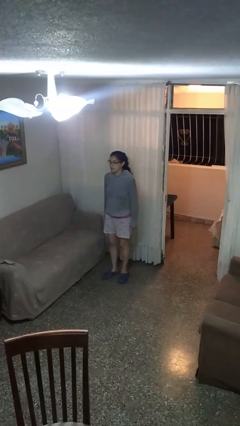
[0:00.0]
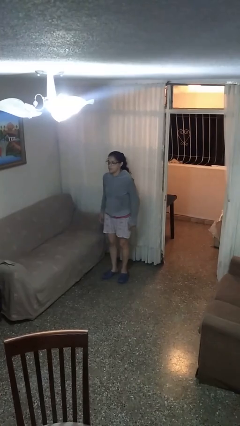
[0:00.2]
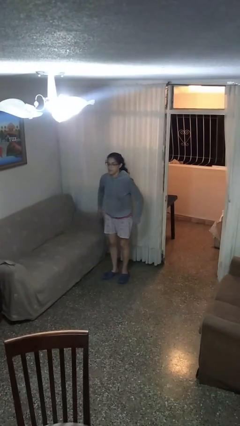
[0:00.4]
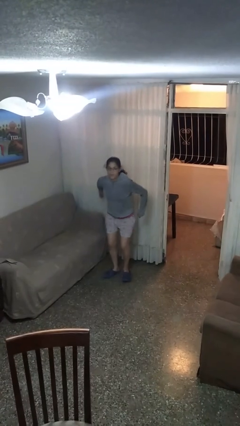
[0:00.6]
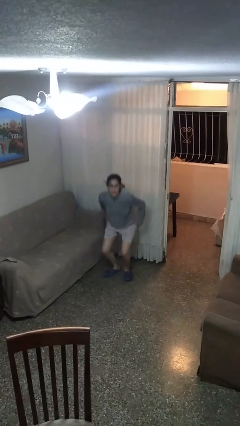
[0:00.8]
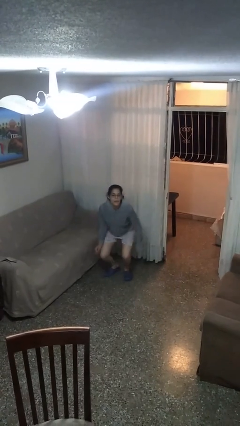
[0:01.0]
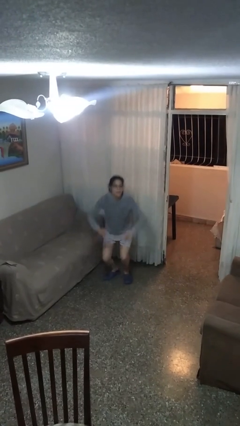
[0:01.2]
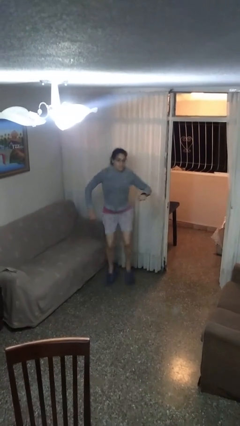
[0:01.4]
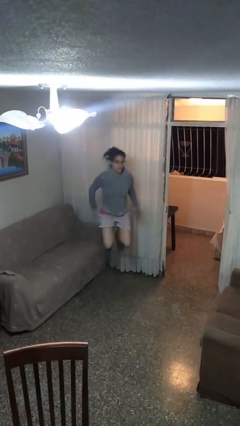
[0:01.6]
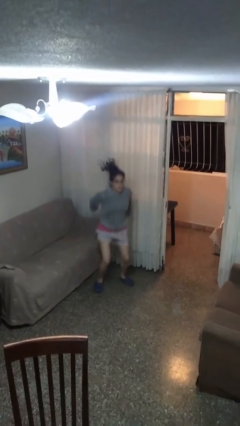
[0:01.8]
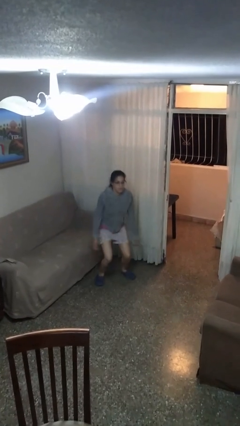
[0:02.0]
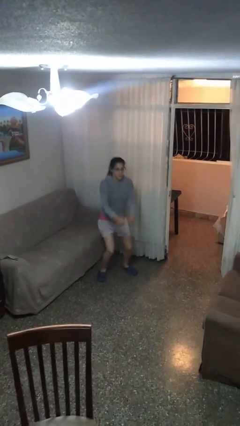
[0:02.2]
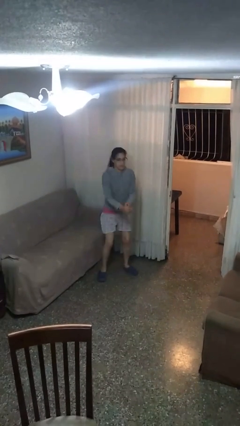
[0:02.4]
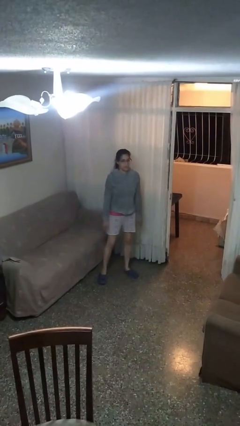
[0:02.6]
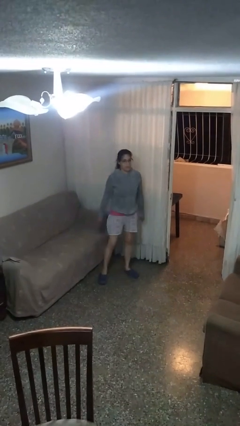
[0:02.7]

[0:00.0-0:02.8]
person jumps

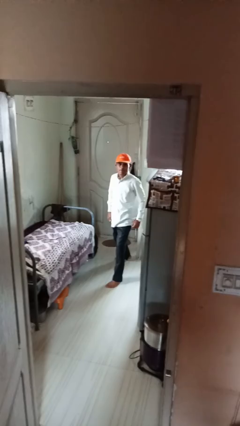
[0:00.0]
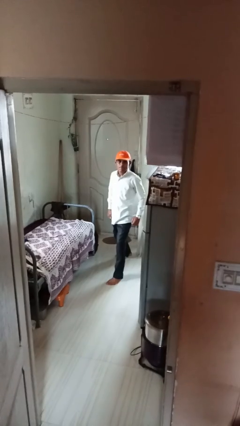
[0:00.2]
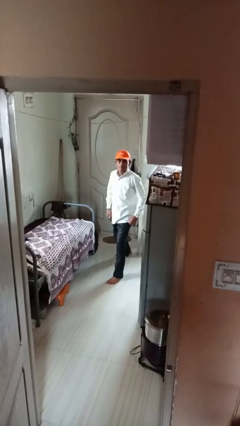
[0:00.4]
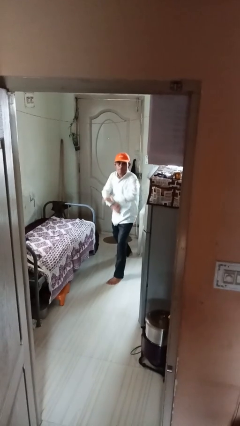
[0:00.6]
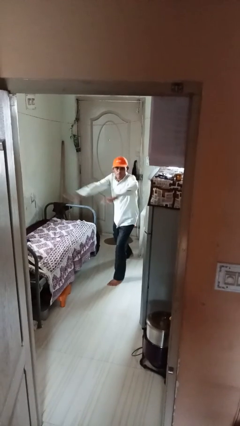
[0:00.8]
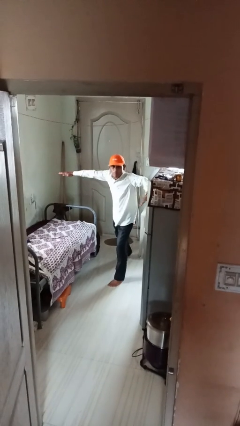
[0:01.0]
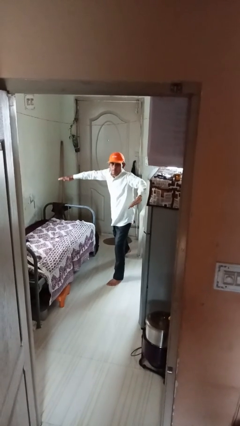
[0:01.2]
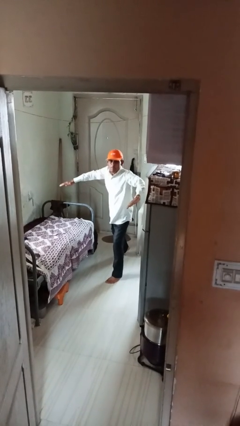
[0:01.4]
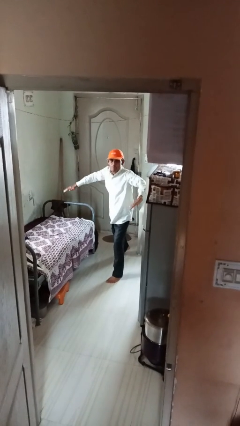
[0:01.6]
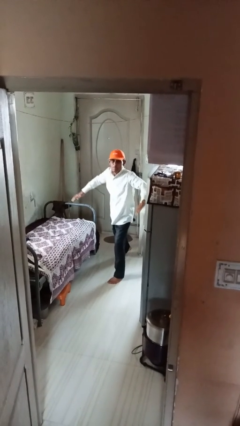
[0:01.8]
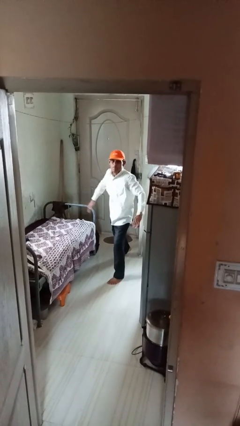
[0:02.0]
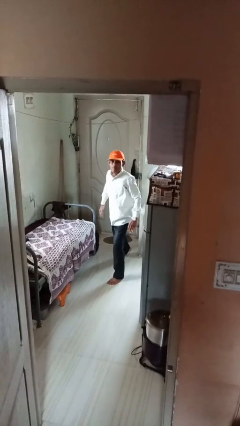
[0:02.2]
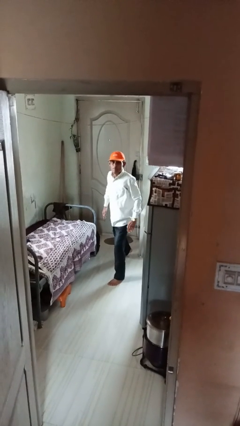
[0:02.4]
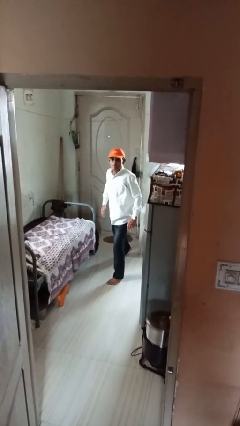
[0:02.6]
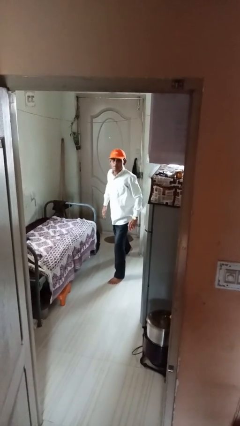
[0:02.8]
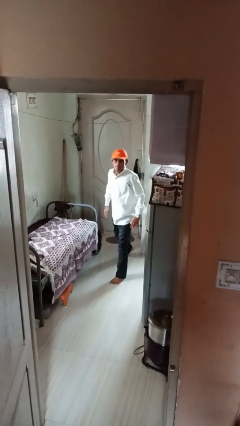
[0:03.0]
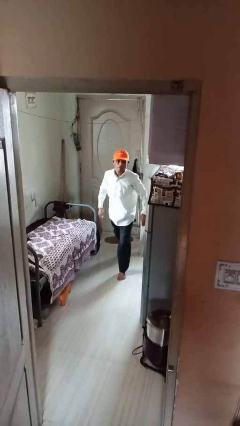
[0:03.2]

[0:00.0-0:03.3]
person karate chop

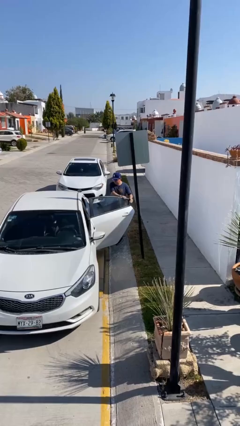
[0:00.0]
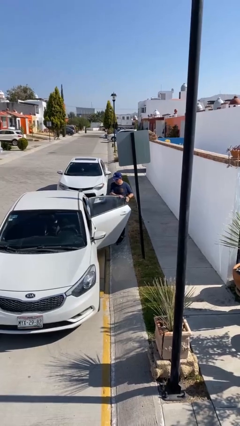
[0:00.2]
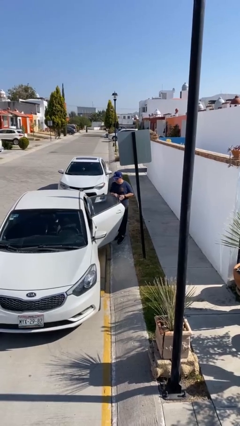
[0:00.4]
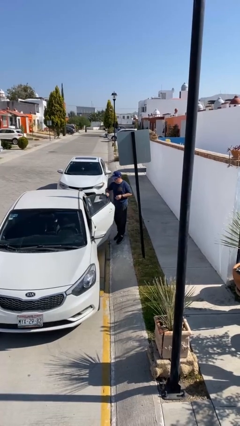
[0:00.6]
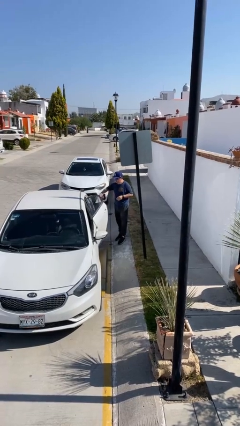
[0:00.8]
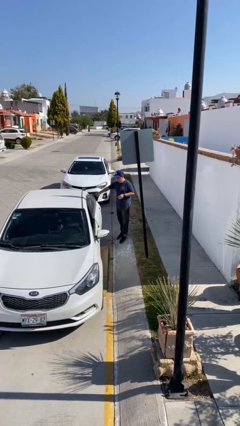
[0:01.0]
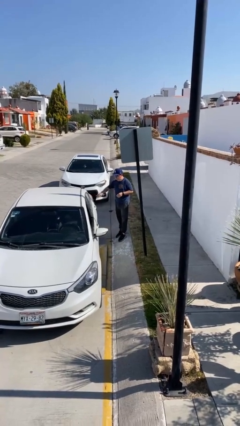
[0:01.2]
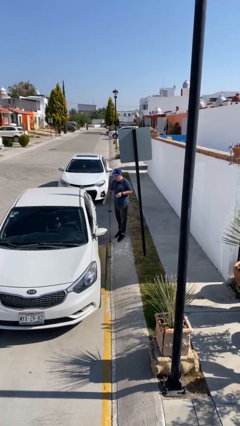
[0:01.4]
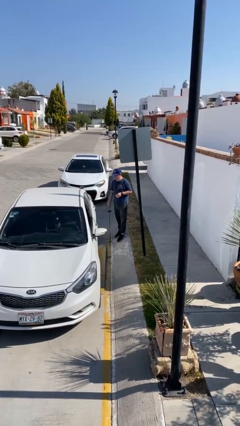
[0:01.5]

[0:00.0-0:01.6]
person closes car door

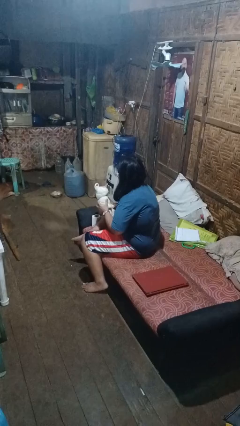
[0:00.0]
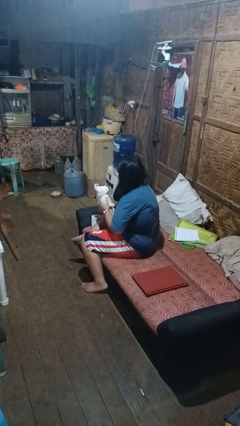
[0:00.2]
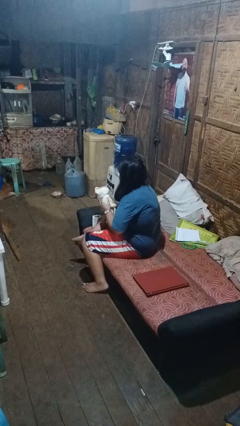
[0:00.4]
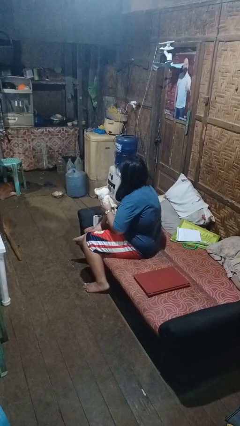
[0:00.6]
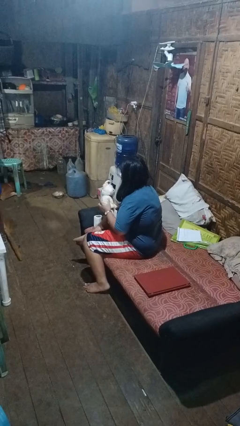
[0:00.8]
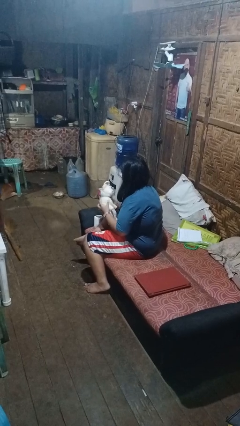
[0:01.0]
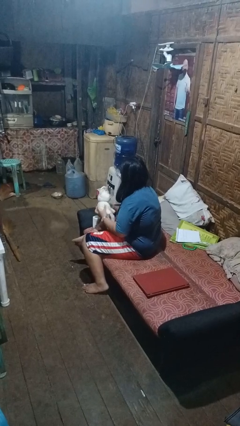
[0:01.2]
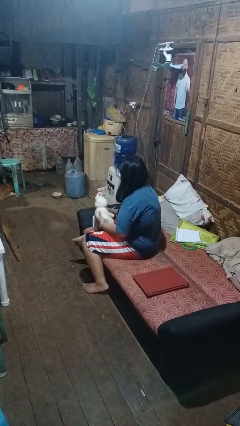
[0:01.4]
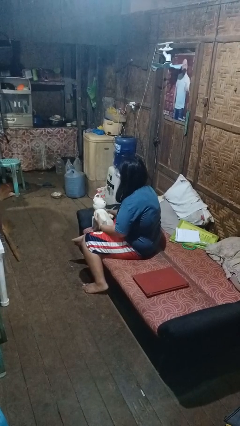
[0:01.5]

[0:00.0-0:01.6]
person squeezes object

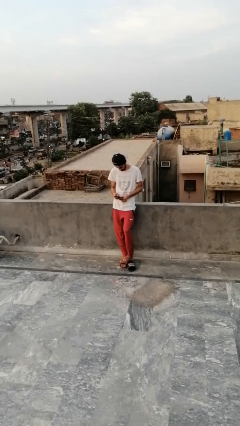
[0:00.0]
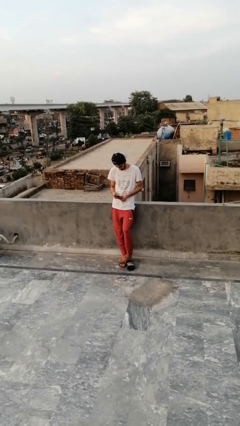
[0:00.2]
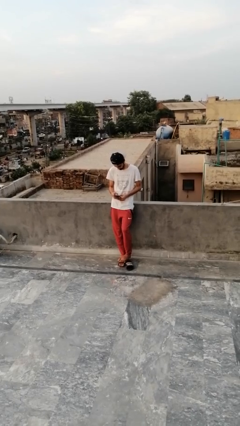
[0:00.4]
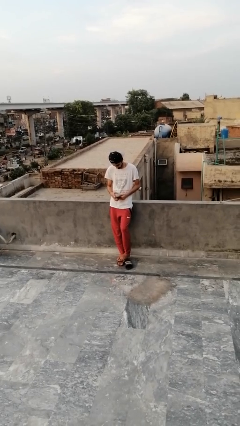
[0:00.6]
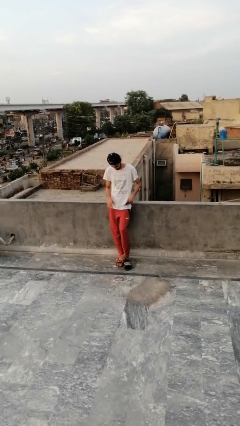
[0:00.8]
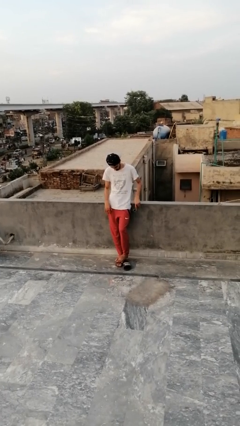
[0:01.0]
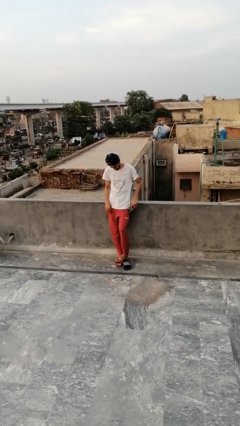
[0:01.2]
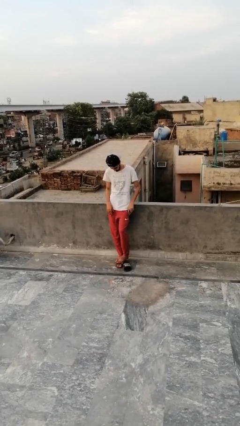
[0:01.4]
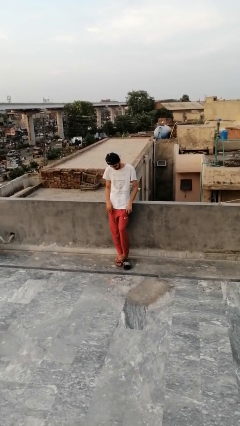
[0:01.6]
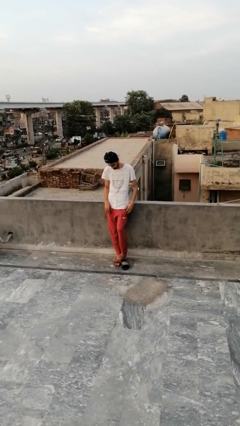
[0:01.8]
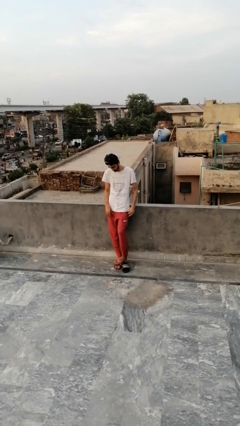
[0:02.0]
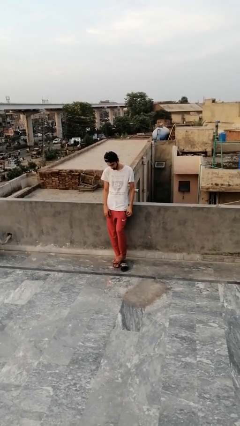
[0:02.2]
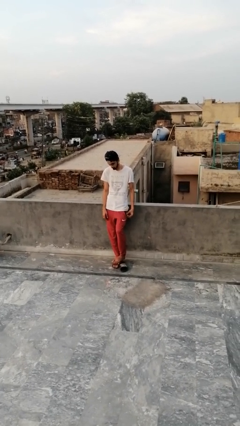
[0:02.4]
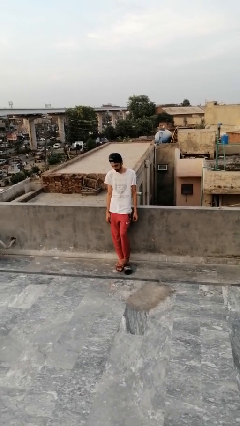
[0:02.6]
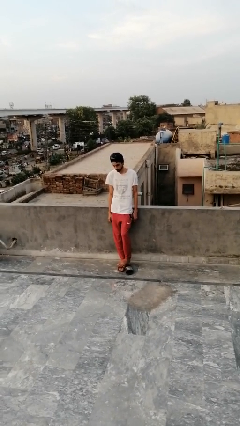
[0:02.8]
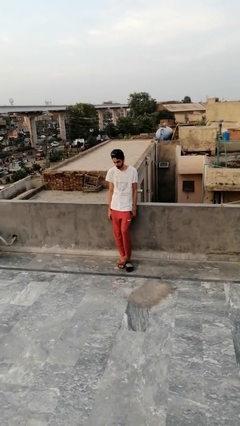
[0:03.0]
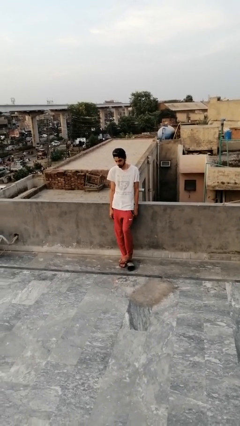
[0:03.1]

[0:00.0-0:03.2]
person puts phone into pocket

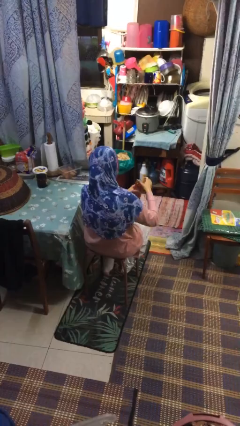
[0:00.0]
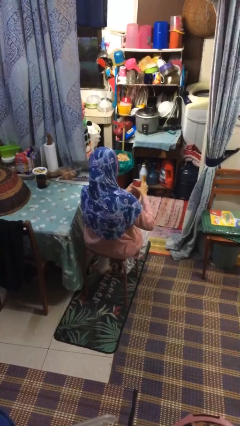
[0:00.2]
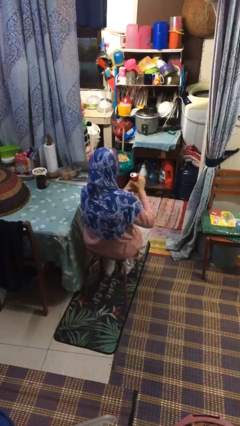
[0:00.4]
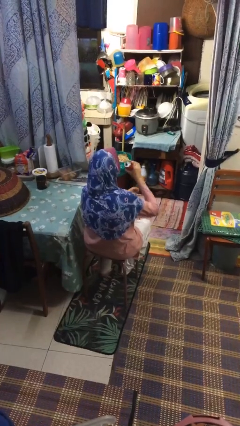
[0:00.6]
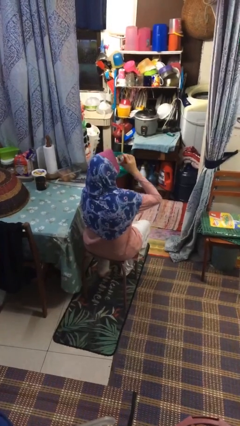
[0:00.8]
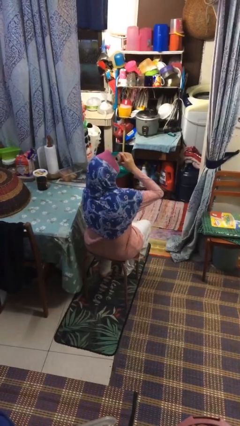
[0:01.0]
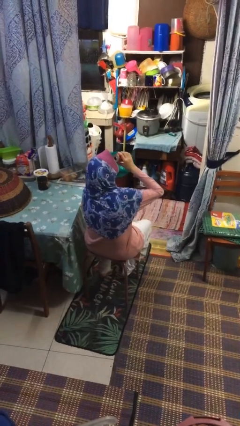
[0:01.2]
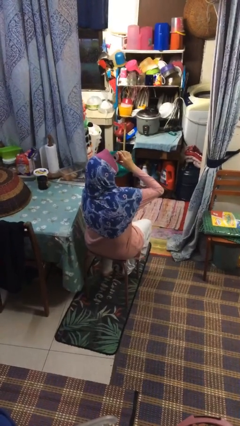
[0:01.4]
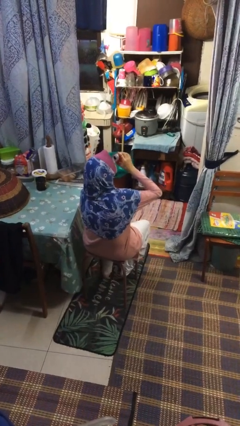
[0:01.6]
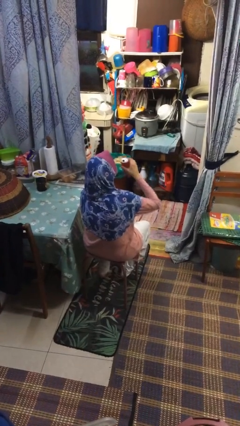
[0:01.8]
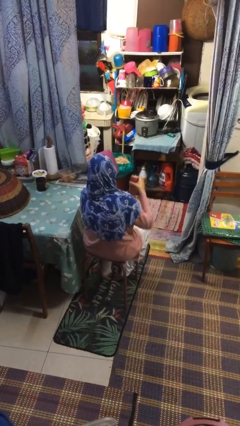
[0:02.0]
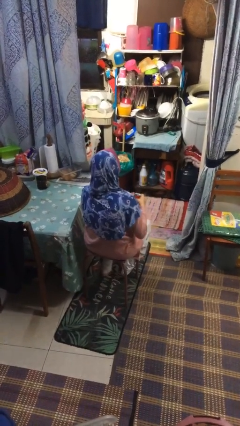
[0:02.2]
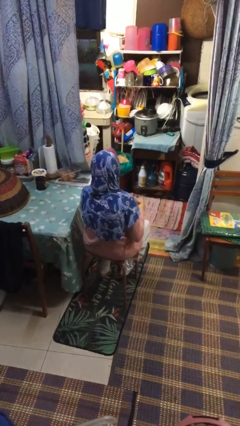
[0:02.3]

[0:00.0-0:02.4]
person drinks from beverage can

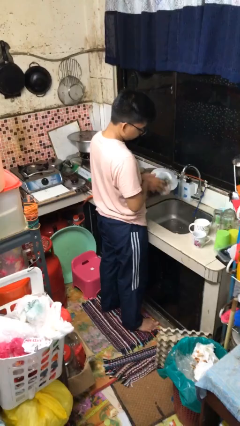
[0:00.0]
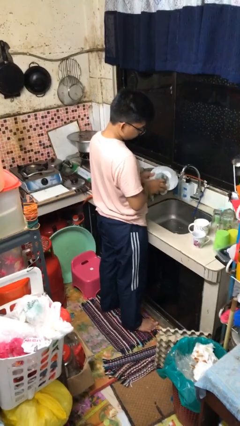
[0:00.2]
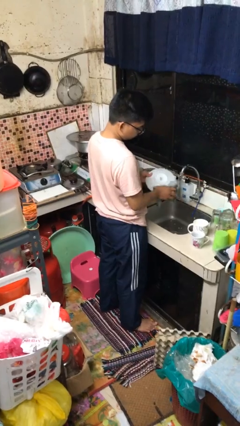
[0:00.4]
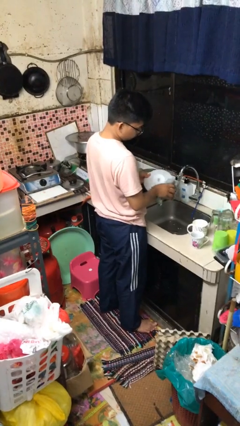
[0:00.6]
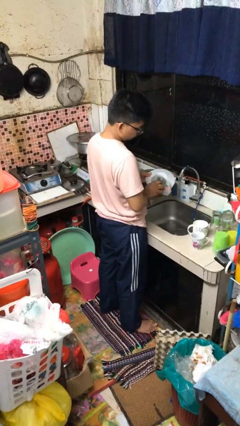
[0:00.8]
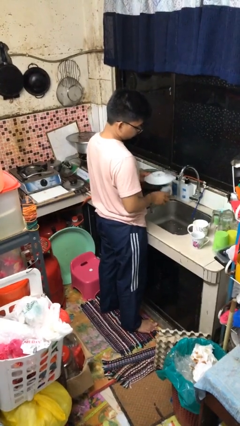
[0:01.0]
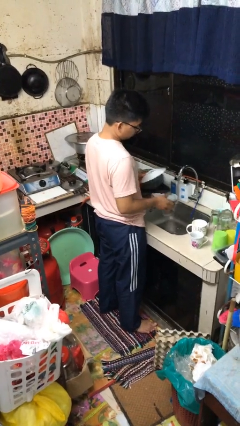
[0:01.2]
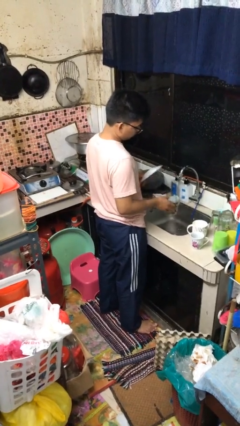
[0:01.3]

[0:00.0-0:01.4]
person dries dish

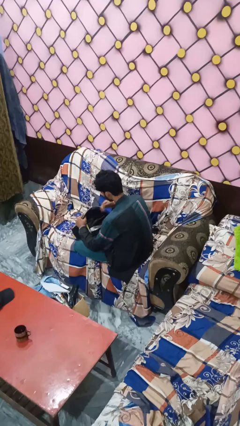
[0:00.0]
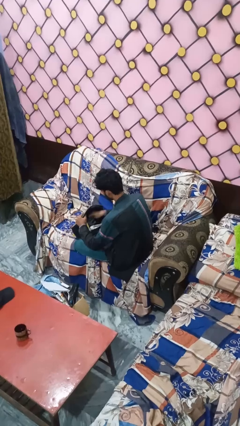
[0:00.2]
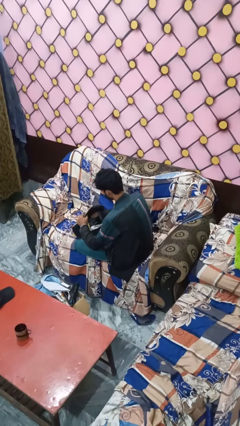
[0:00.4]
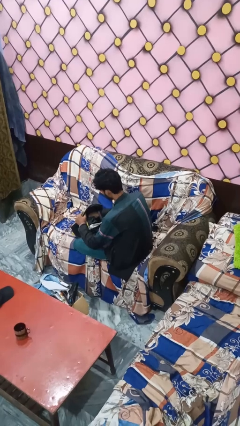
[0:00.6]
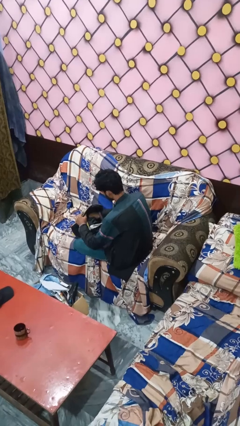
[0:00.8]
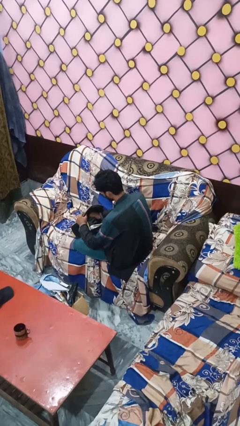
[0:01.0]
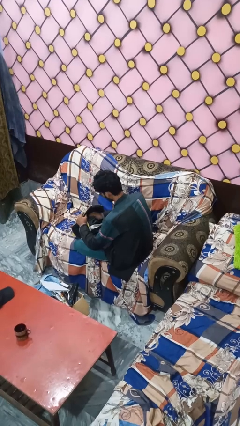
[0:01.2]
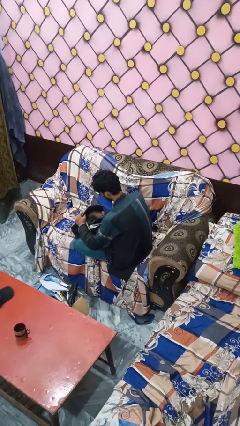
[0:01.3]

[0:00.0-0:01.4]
person searches in bag
